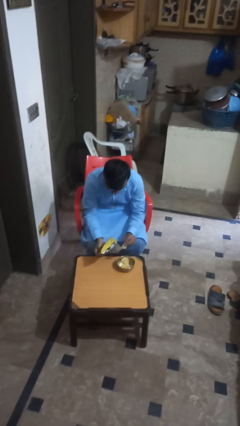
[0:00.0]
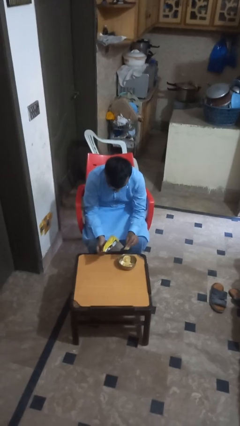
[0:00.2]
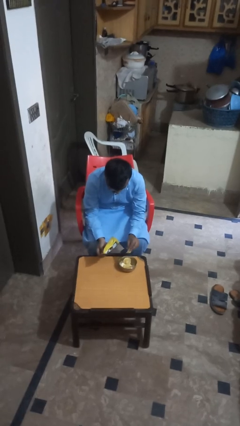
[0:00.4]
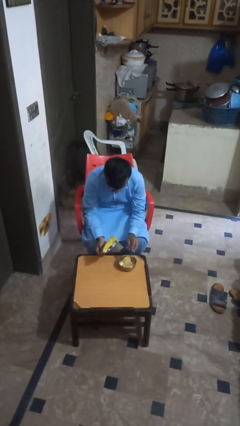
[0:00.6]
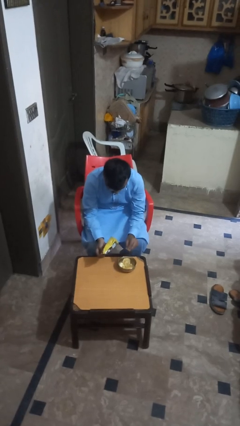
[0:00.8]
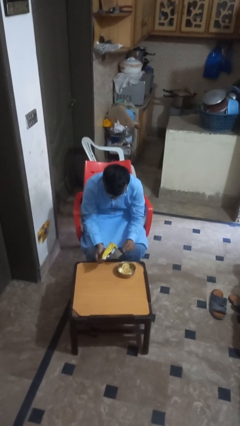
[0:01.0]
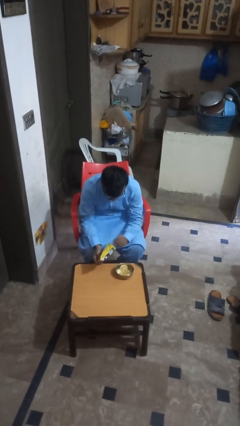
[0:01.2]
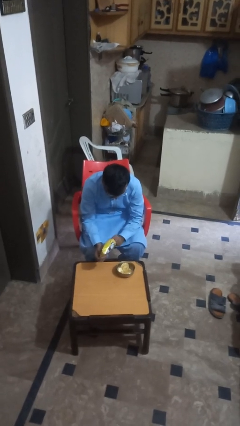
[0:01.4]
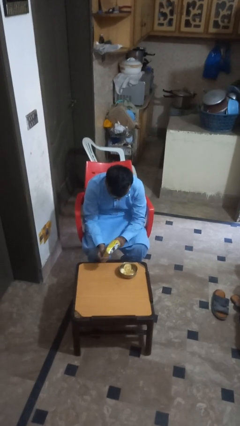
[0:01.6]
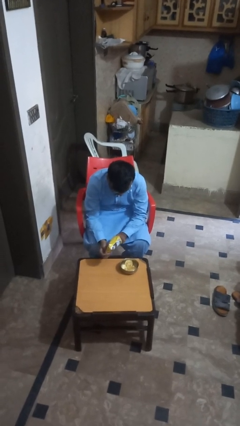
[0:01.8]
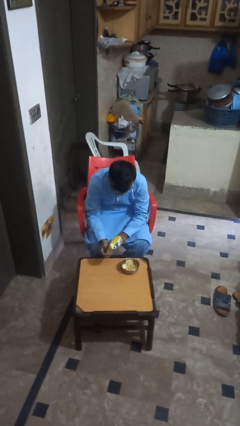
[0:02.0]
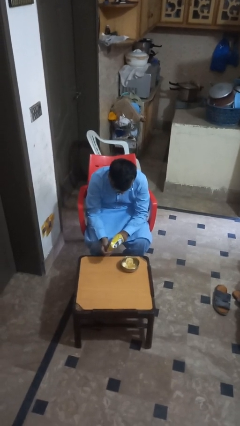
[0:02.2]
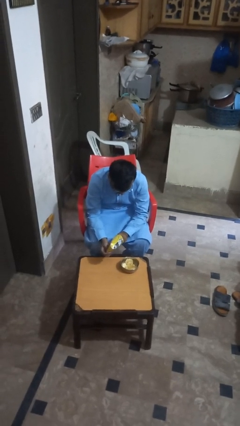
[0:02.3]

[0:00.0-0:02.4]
person pours into bowl

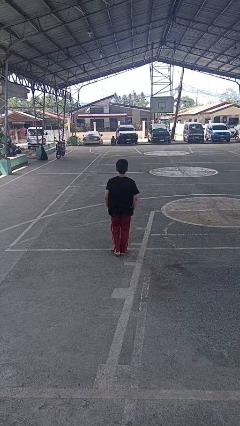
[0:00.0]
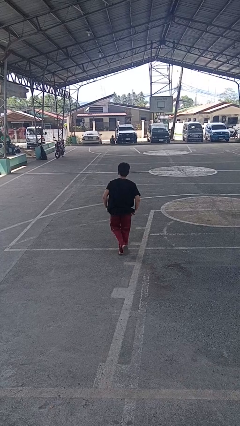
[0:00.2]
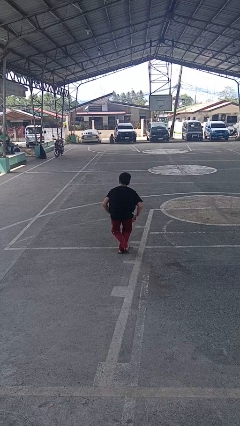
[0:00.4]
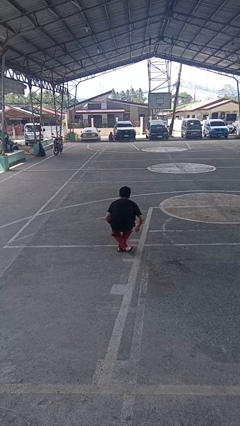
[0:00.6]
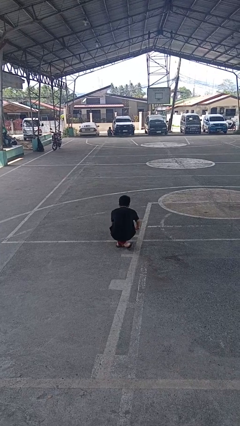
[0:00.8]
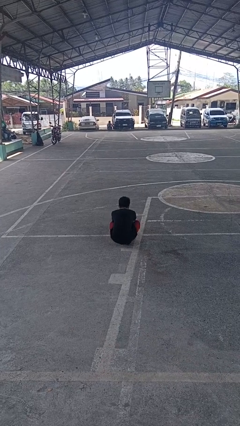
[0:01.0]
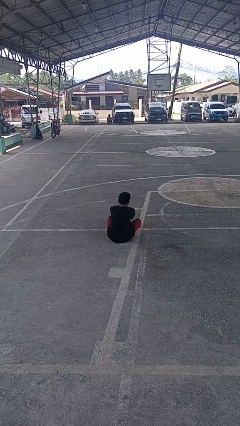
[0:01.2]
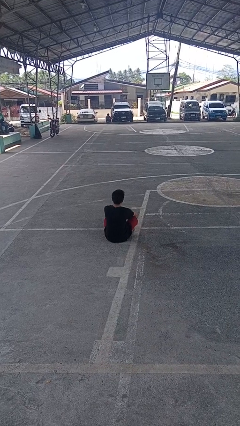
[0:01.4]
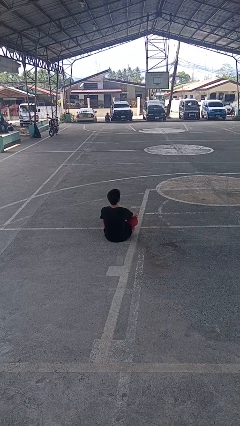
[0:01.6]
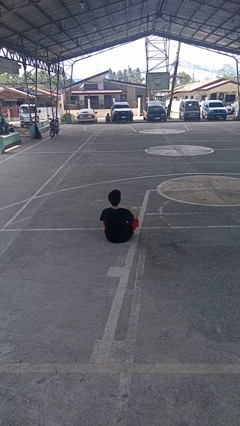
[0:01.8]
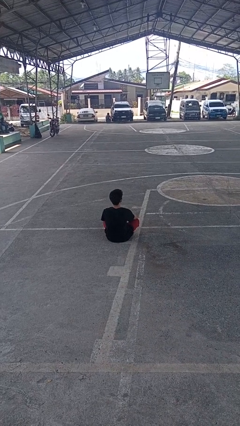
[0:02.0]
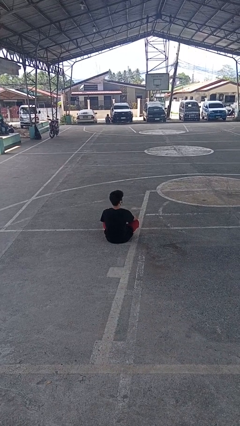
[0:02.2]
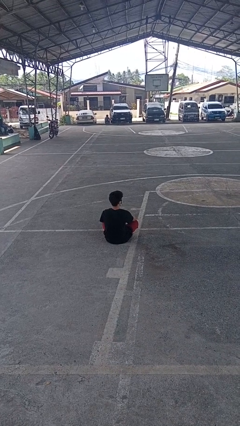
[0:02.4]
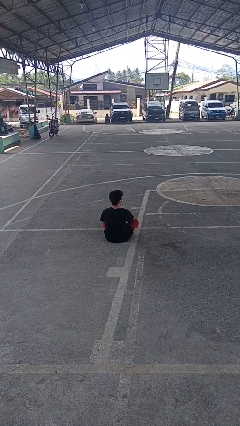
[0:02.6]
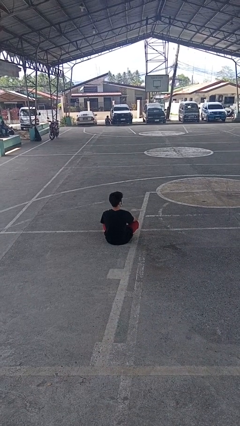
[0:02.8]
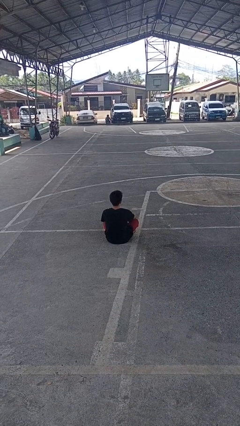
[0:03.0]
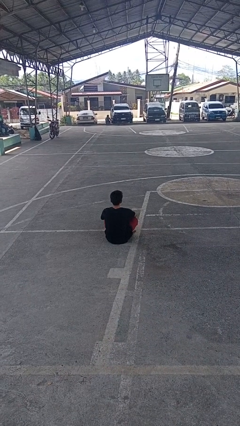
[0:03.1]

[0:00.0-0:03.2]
person sits crisscross

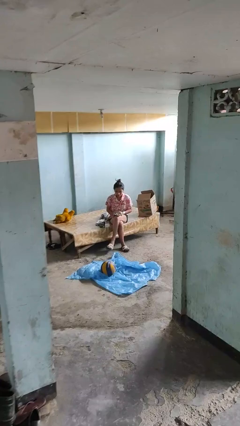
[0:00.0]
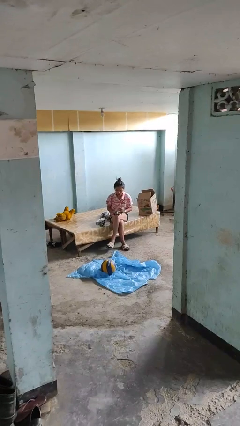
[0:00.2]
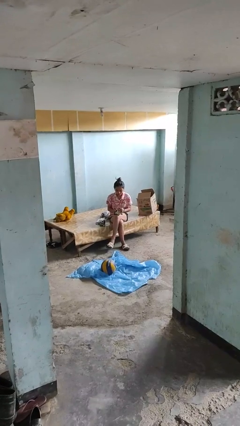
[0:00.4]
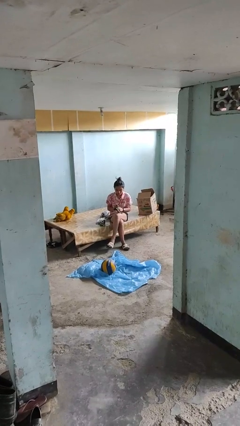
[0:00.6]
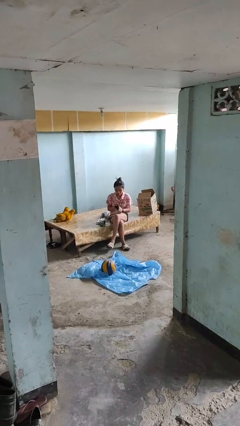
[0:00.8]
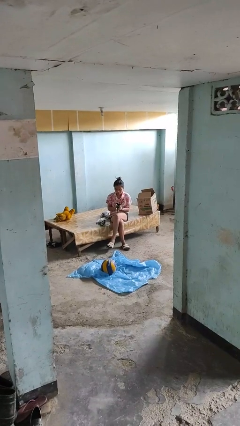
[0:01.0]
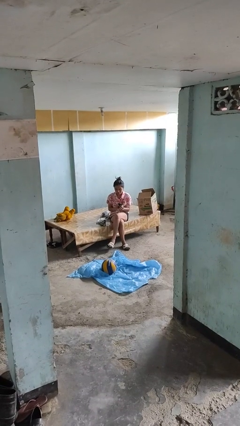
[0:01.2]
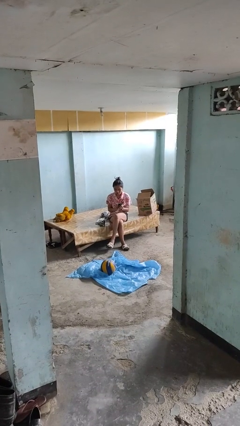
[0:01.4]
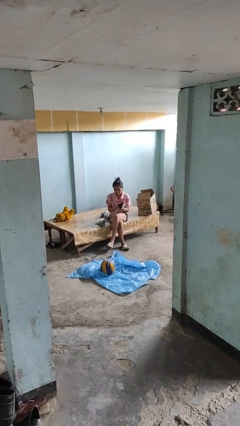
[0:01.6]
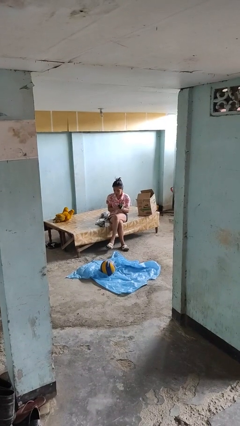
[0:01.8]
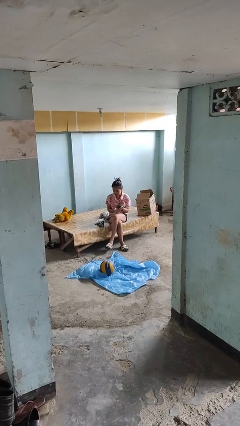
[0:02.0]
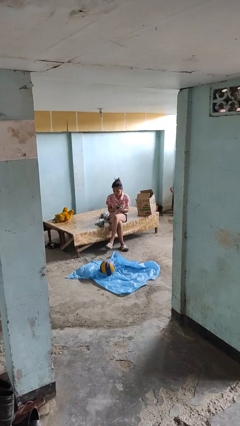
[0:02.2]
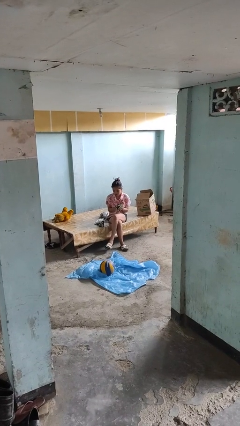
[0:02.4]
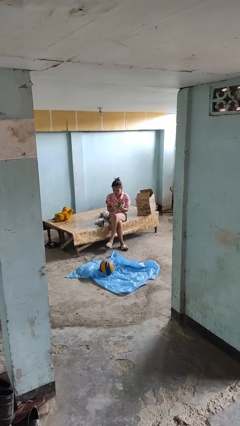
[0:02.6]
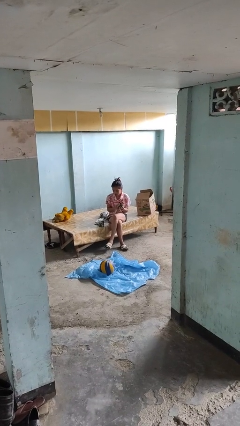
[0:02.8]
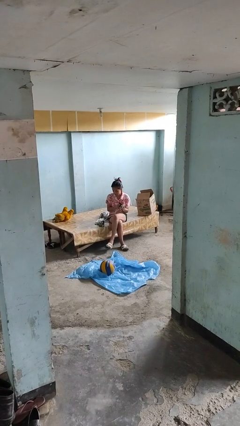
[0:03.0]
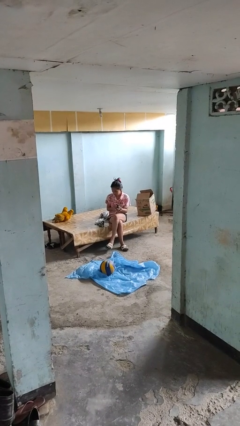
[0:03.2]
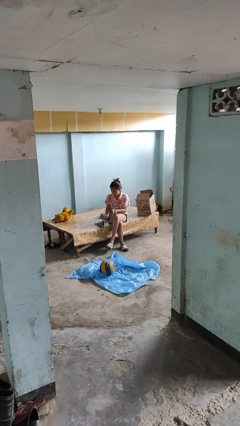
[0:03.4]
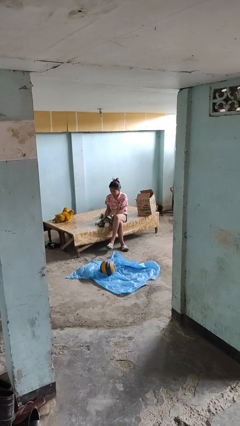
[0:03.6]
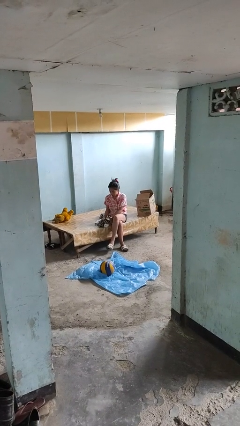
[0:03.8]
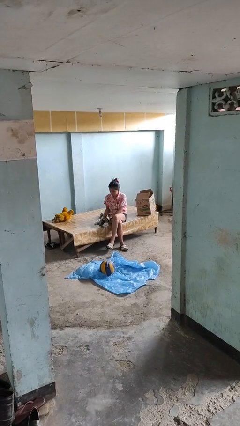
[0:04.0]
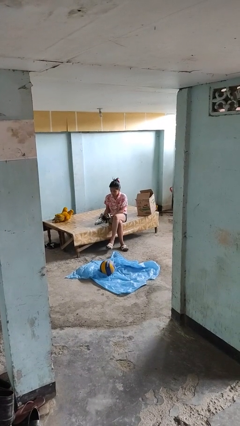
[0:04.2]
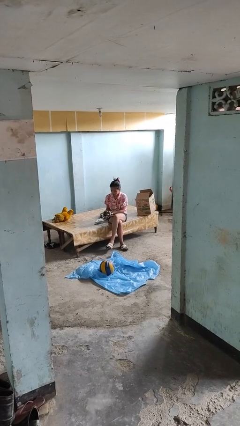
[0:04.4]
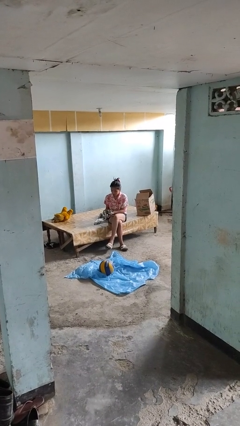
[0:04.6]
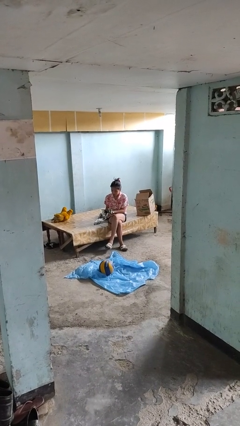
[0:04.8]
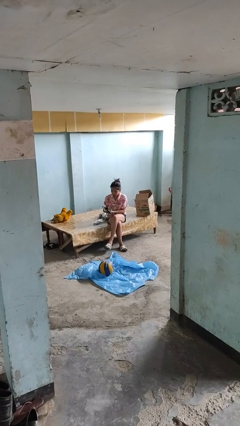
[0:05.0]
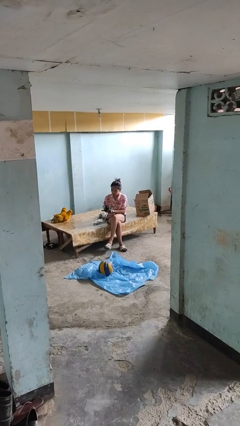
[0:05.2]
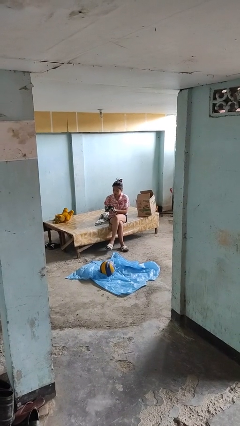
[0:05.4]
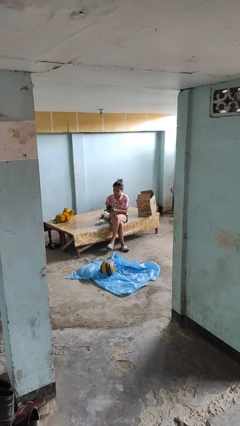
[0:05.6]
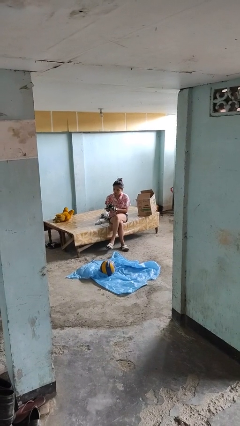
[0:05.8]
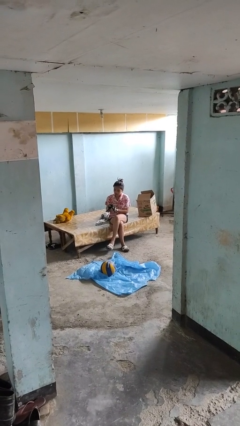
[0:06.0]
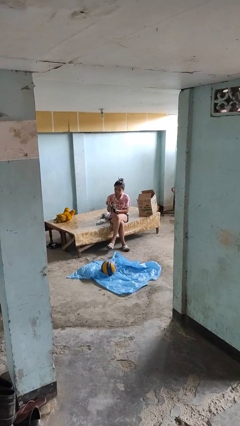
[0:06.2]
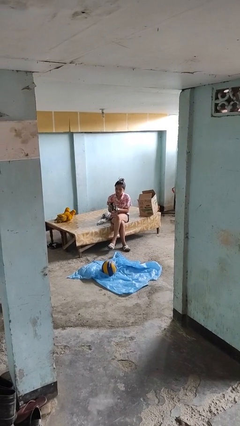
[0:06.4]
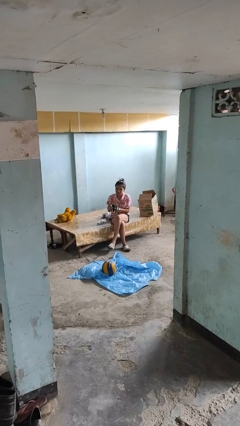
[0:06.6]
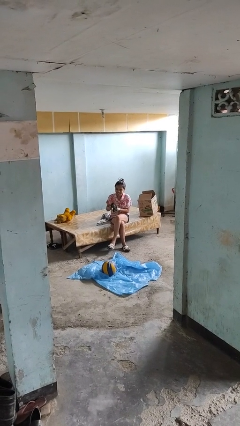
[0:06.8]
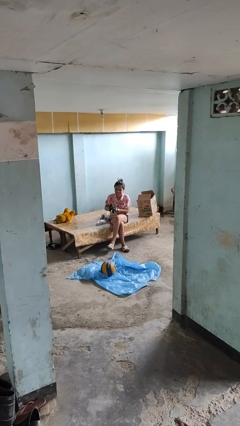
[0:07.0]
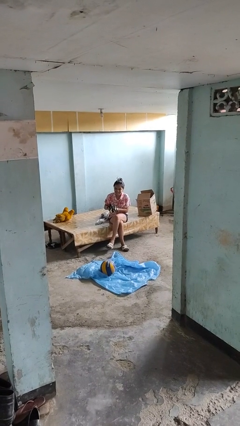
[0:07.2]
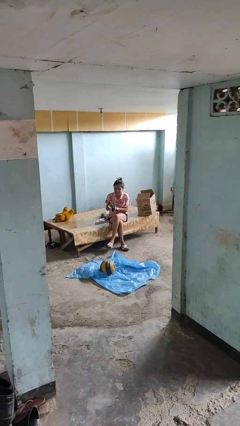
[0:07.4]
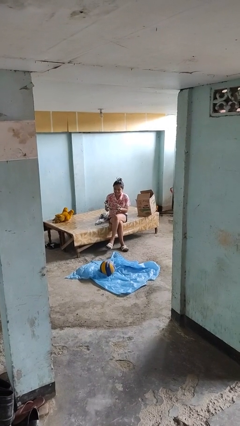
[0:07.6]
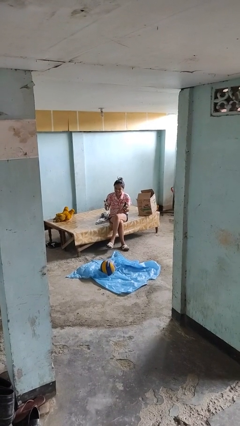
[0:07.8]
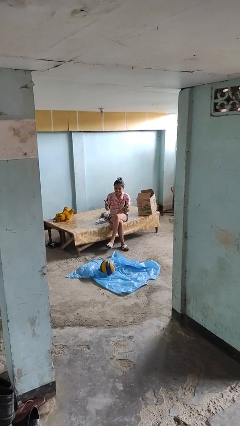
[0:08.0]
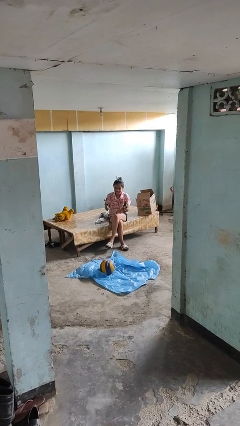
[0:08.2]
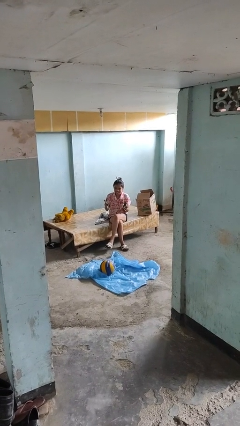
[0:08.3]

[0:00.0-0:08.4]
person puts on gloves

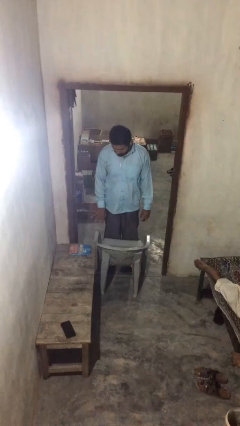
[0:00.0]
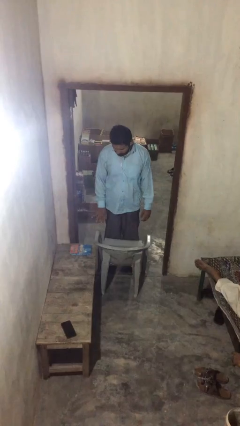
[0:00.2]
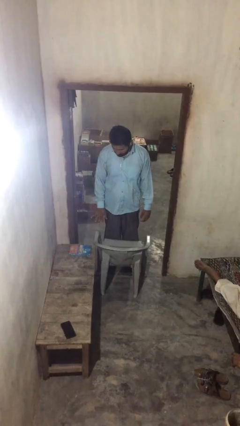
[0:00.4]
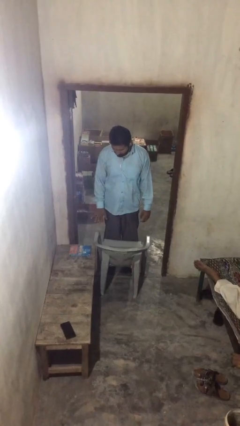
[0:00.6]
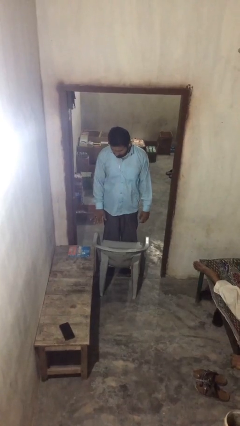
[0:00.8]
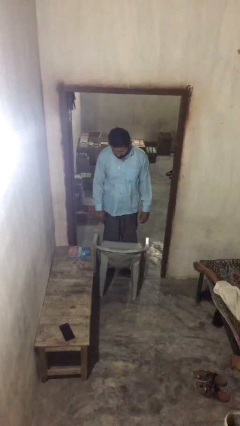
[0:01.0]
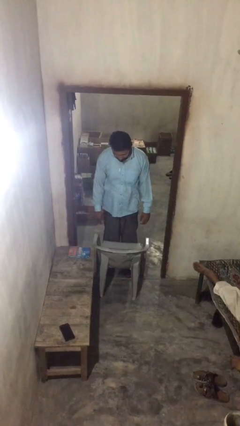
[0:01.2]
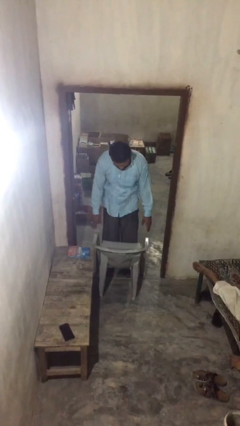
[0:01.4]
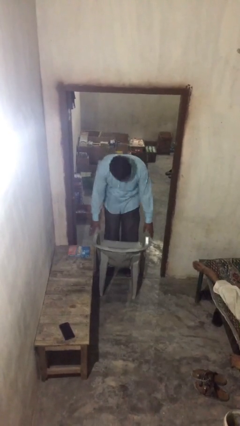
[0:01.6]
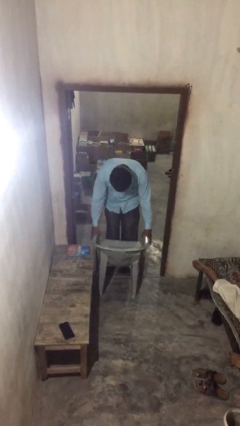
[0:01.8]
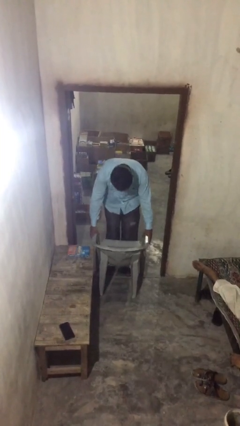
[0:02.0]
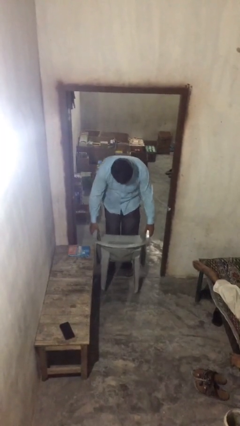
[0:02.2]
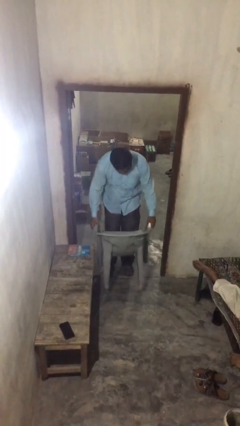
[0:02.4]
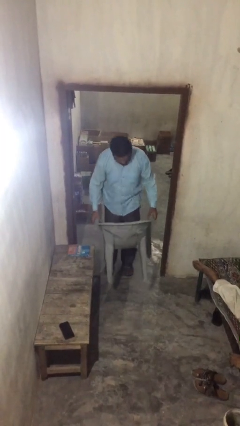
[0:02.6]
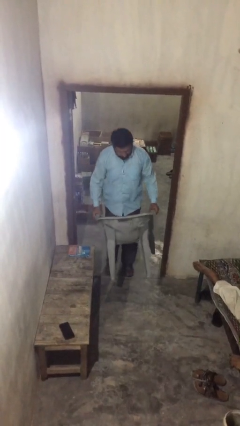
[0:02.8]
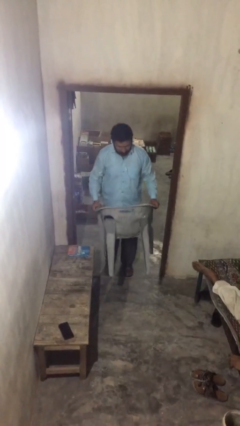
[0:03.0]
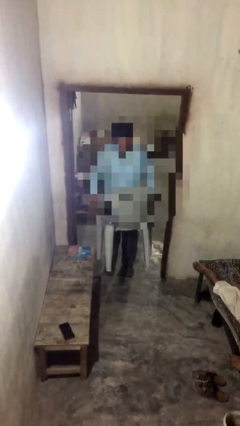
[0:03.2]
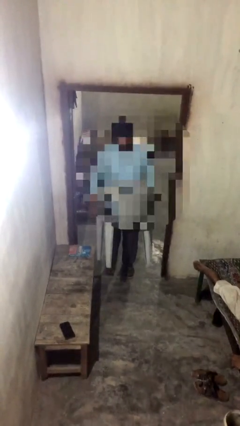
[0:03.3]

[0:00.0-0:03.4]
person picks up object from table
